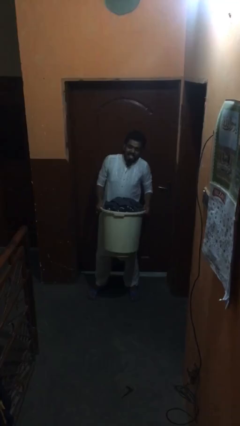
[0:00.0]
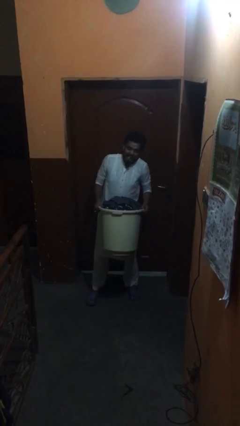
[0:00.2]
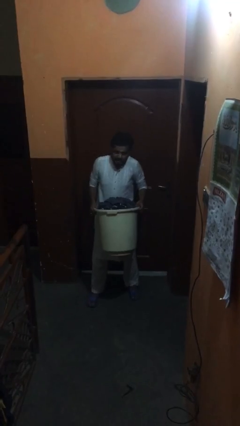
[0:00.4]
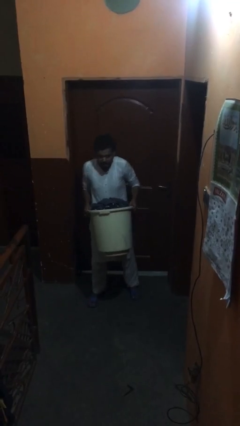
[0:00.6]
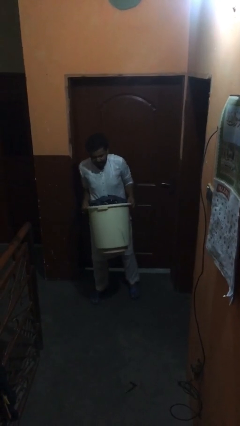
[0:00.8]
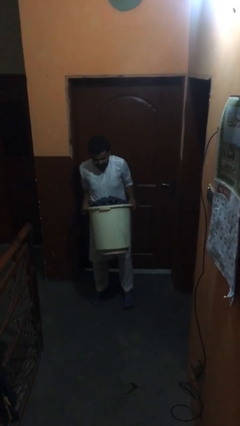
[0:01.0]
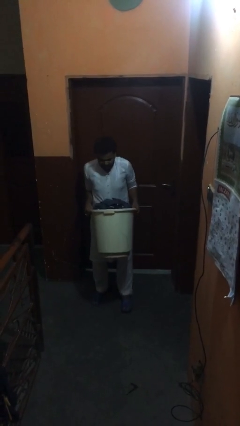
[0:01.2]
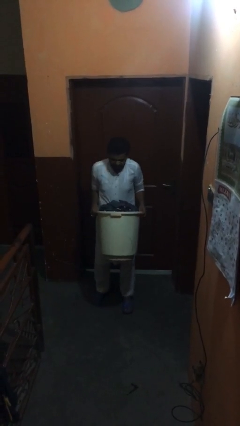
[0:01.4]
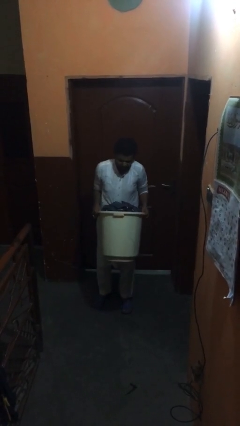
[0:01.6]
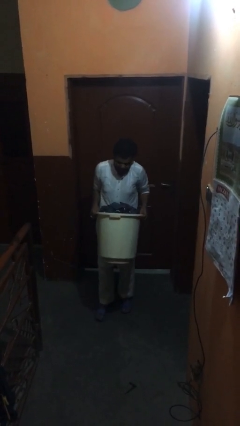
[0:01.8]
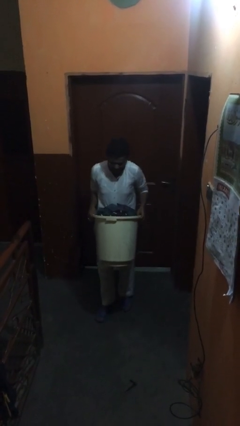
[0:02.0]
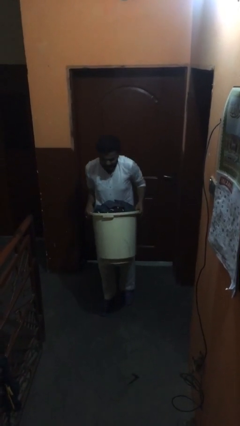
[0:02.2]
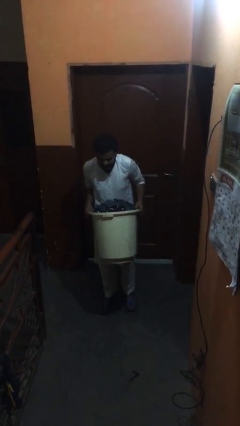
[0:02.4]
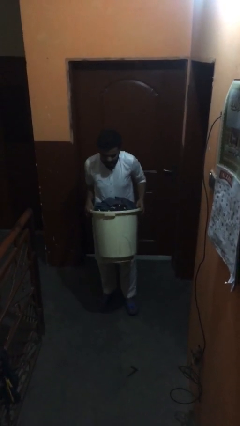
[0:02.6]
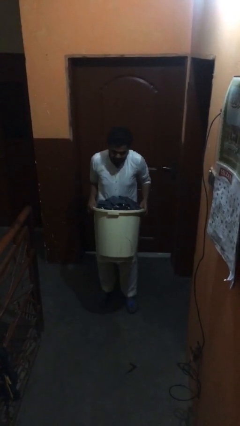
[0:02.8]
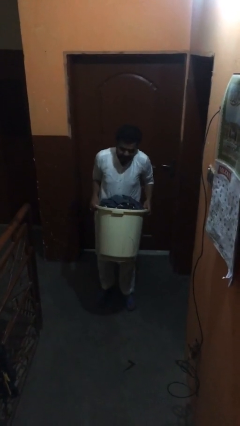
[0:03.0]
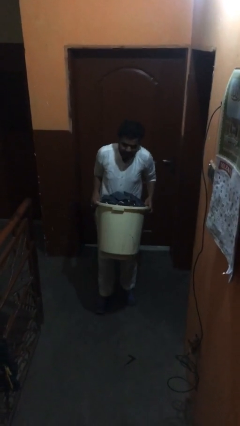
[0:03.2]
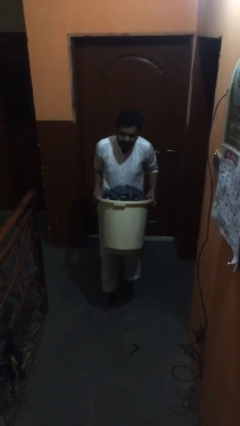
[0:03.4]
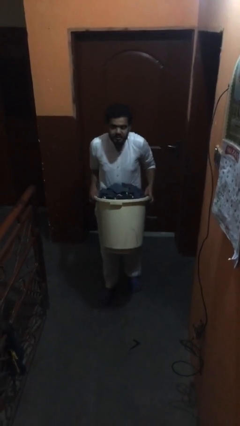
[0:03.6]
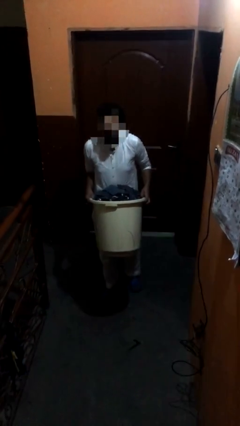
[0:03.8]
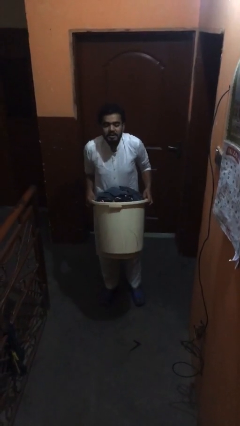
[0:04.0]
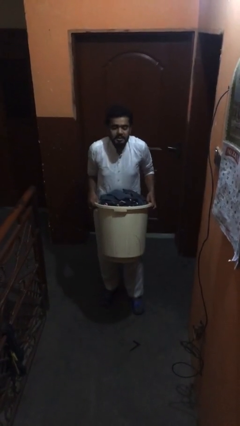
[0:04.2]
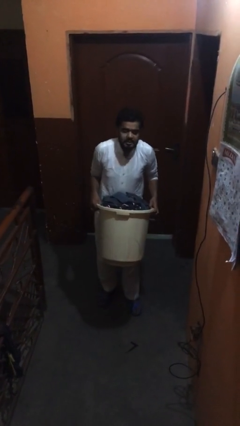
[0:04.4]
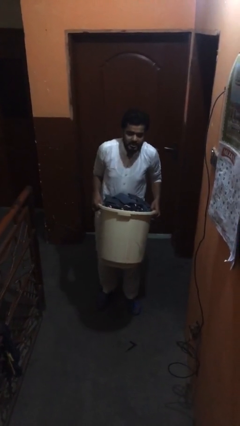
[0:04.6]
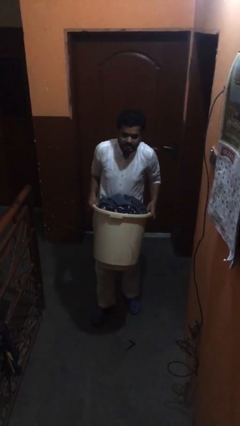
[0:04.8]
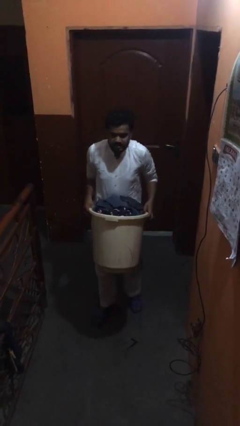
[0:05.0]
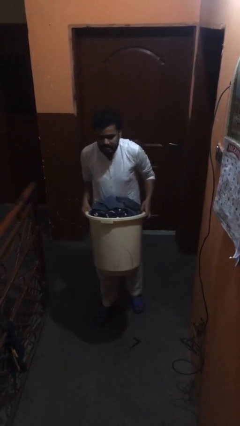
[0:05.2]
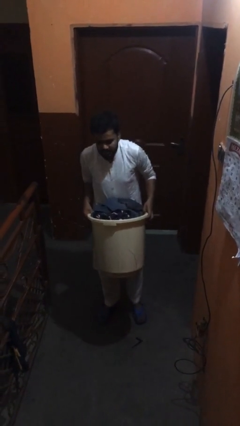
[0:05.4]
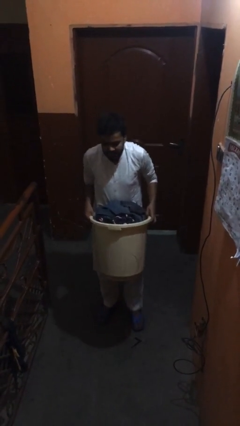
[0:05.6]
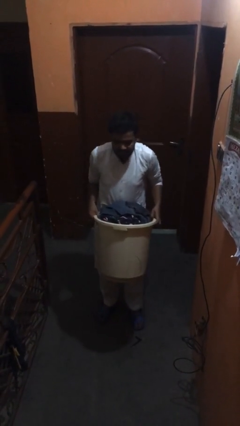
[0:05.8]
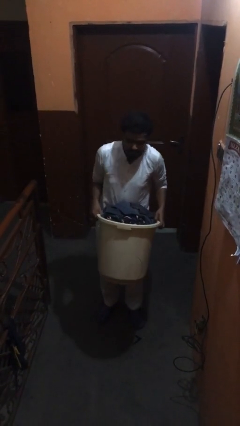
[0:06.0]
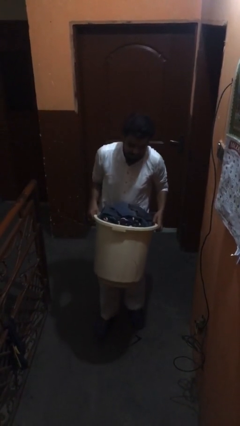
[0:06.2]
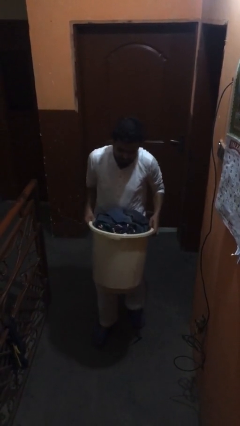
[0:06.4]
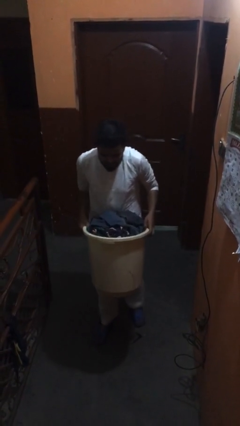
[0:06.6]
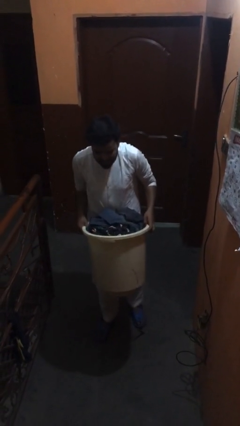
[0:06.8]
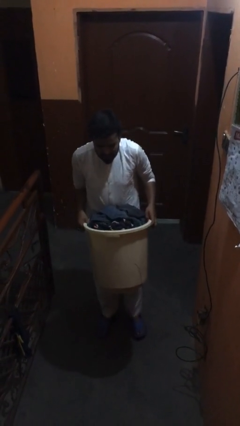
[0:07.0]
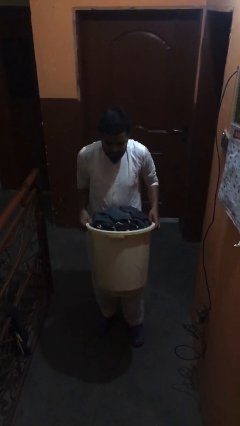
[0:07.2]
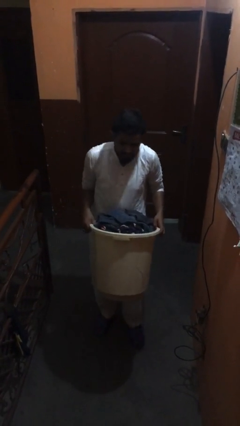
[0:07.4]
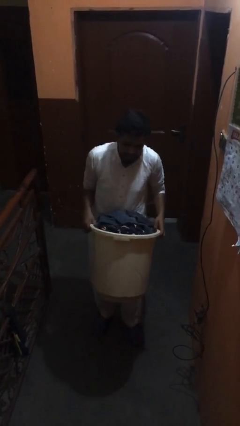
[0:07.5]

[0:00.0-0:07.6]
person carries heavy object

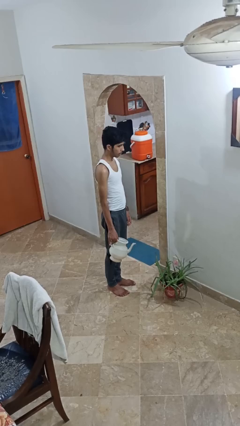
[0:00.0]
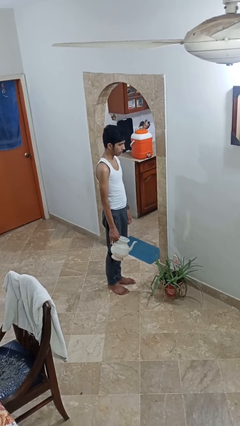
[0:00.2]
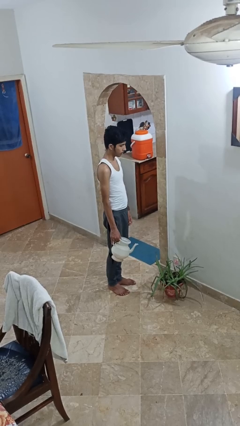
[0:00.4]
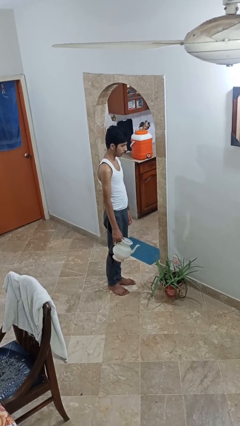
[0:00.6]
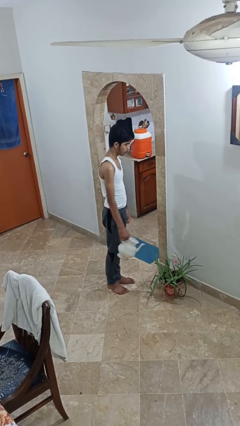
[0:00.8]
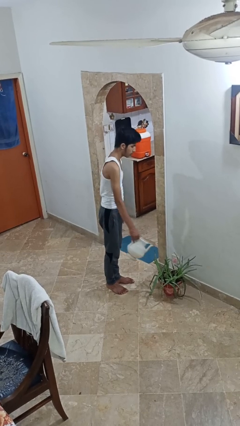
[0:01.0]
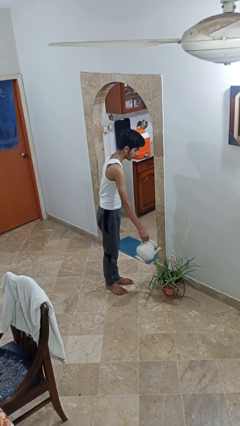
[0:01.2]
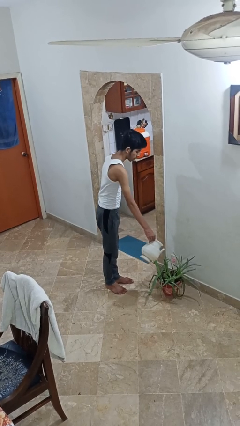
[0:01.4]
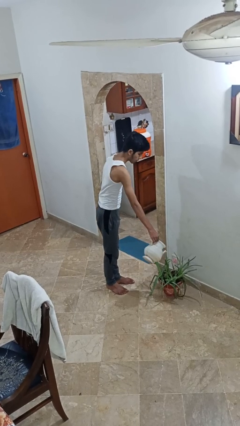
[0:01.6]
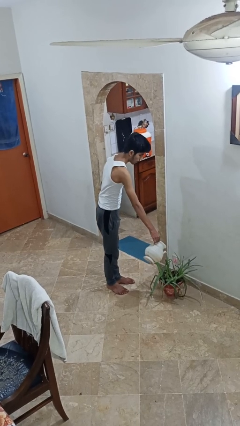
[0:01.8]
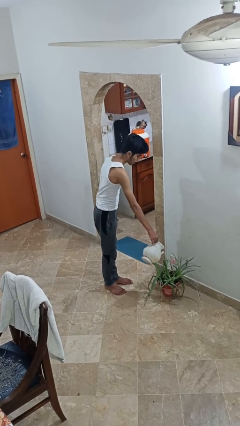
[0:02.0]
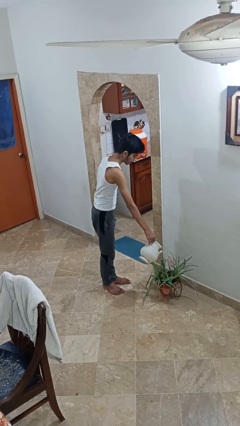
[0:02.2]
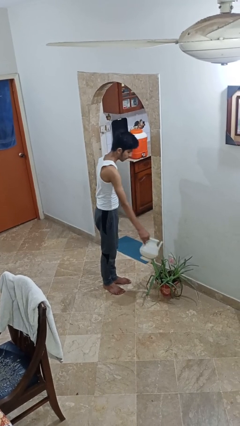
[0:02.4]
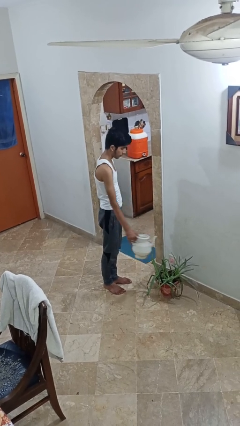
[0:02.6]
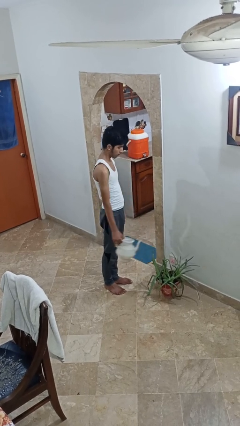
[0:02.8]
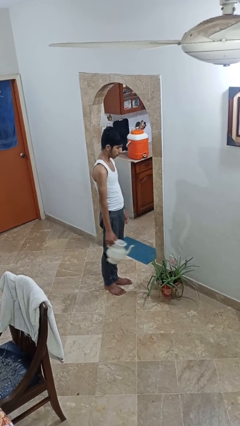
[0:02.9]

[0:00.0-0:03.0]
person waters houseplant

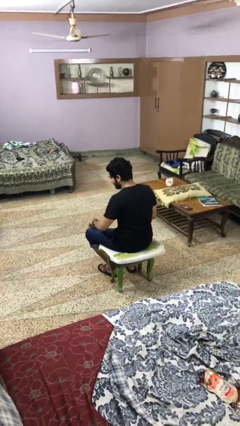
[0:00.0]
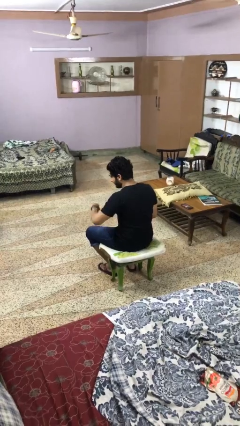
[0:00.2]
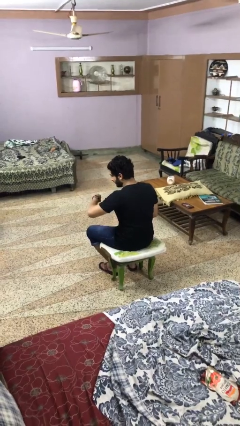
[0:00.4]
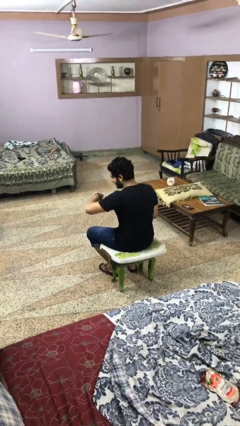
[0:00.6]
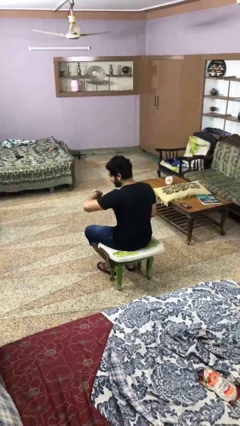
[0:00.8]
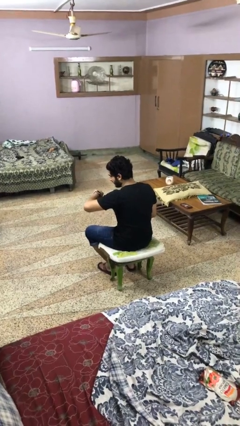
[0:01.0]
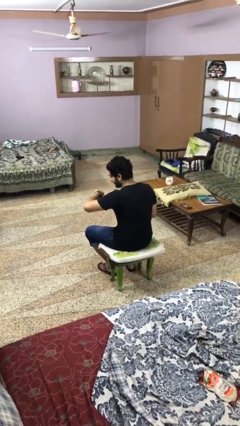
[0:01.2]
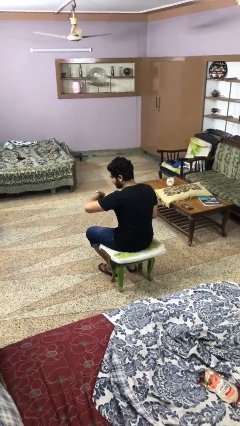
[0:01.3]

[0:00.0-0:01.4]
person looks at wristwatch

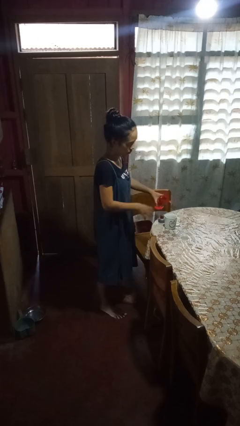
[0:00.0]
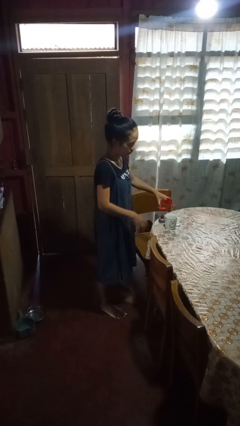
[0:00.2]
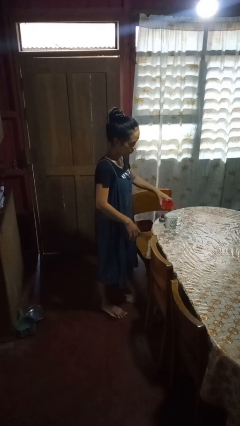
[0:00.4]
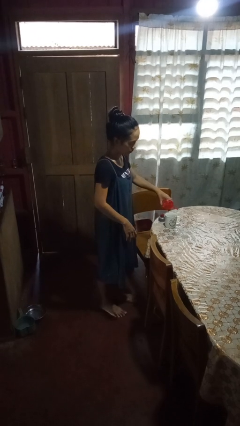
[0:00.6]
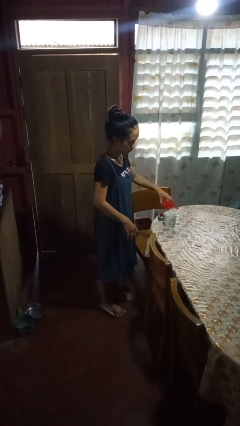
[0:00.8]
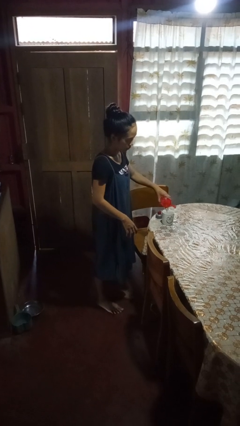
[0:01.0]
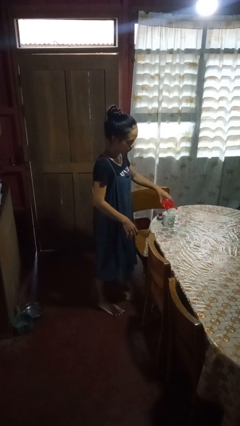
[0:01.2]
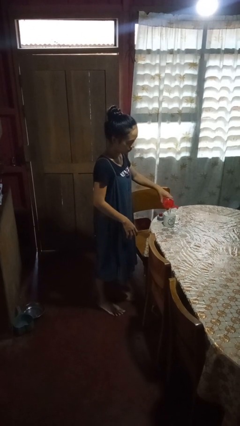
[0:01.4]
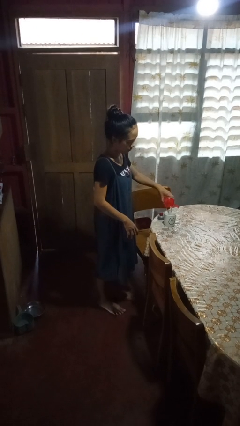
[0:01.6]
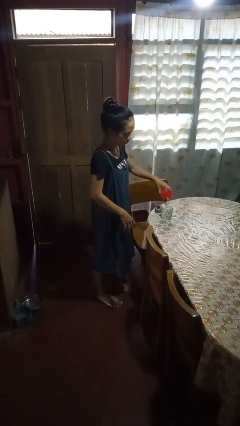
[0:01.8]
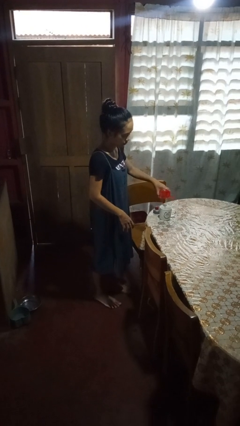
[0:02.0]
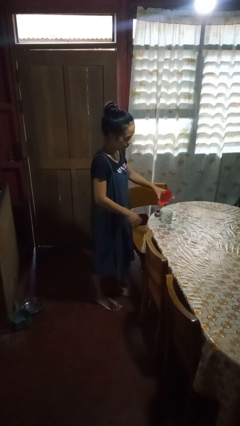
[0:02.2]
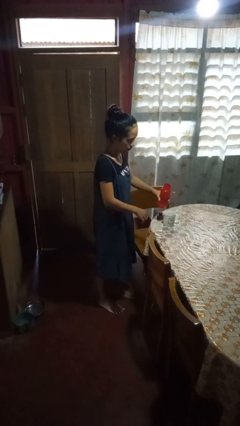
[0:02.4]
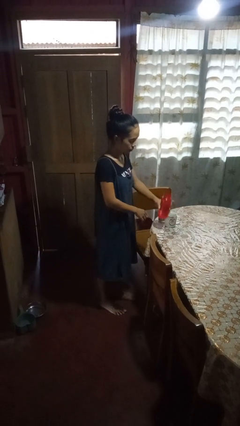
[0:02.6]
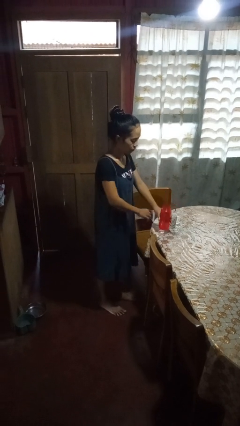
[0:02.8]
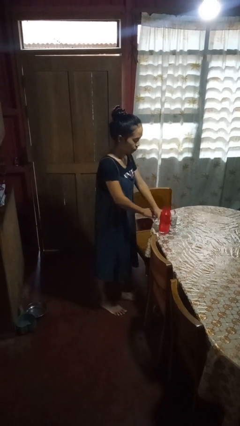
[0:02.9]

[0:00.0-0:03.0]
person pours liquid into cup

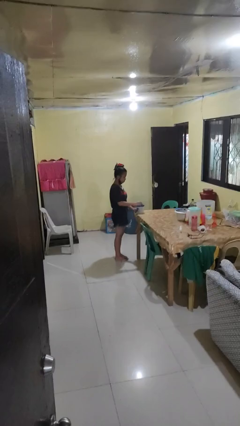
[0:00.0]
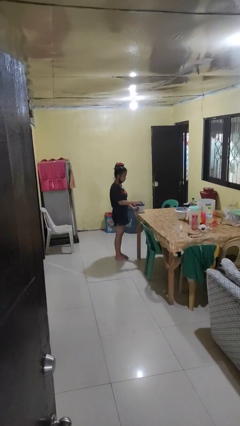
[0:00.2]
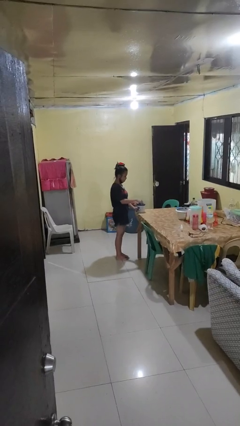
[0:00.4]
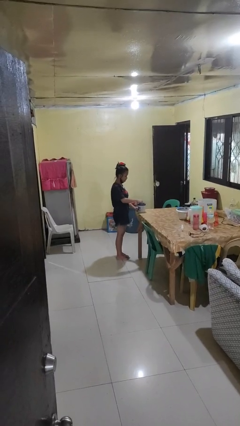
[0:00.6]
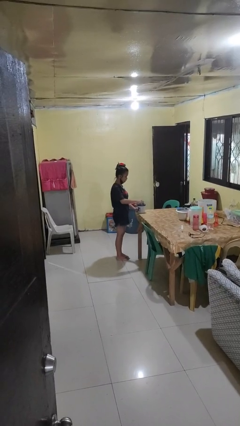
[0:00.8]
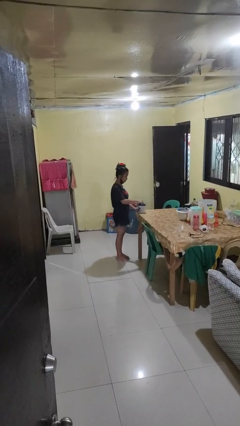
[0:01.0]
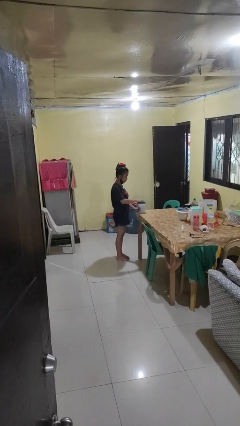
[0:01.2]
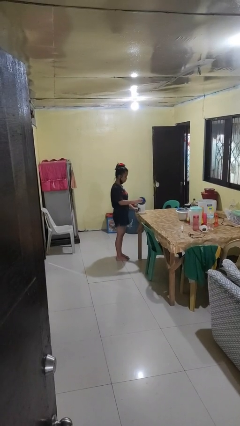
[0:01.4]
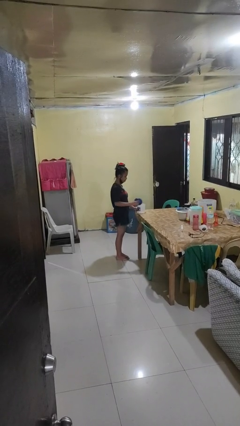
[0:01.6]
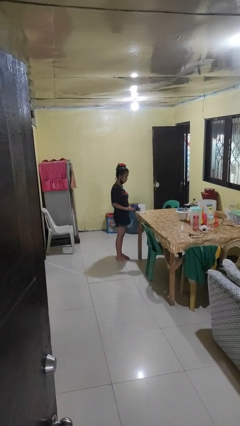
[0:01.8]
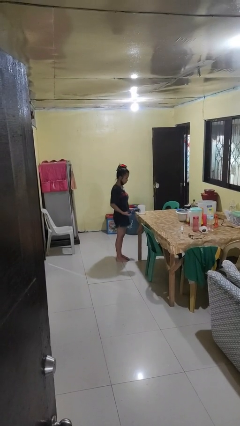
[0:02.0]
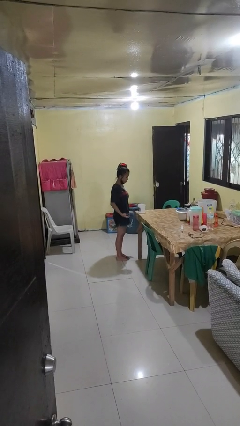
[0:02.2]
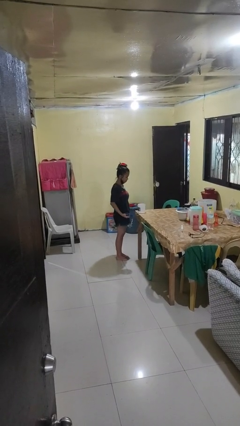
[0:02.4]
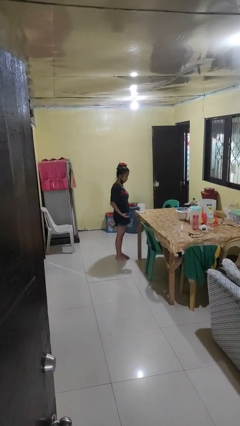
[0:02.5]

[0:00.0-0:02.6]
person opens jar

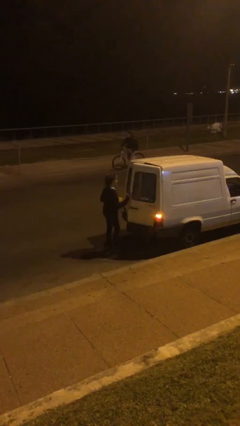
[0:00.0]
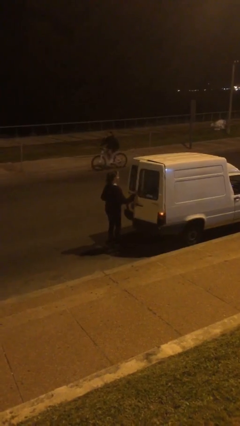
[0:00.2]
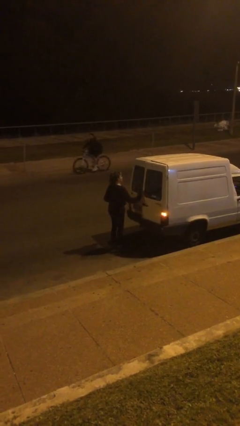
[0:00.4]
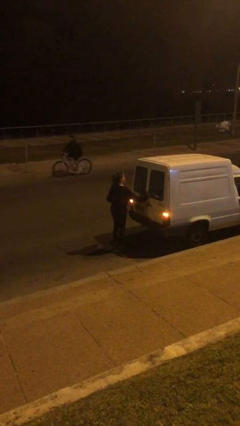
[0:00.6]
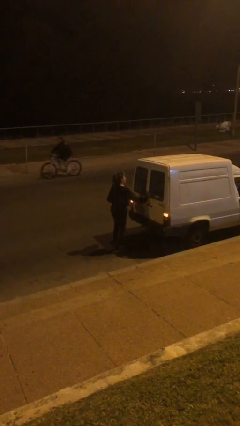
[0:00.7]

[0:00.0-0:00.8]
person closes car door
